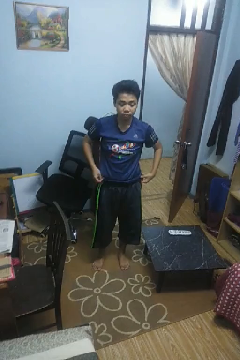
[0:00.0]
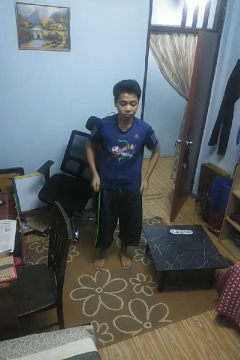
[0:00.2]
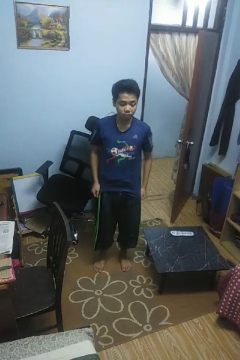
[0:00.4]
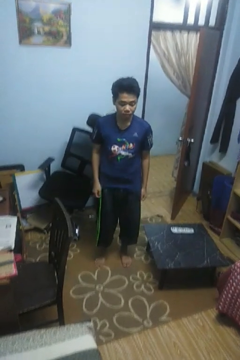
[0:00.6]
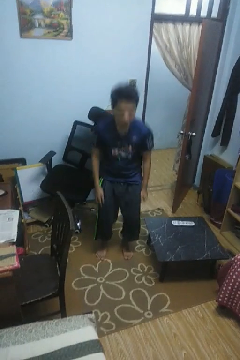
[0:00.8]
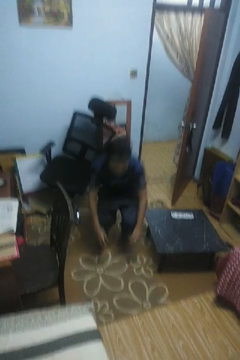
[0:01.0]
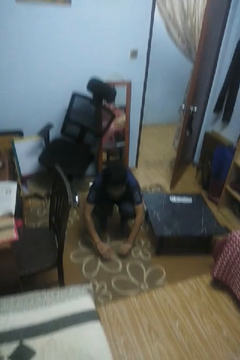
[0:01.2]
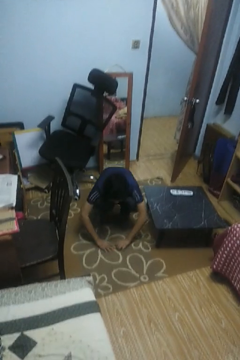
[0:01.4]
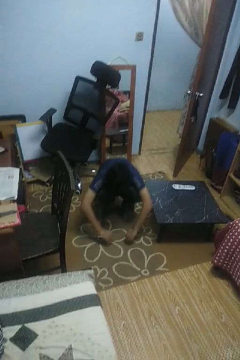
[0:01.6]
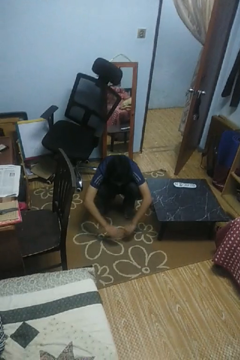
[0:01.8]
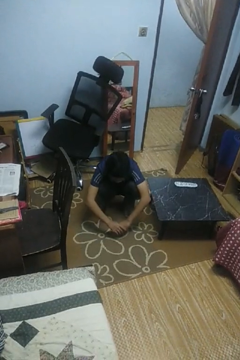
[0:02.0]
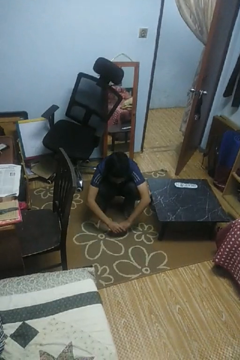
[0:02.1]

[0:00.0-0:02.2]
person squats

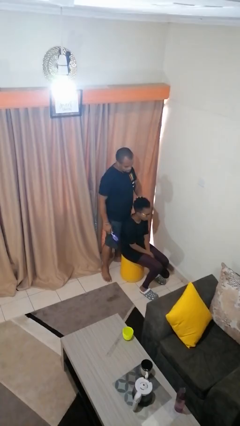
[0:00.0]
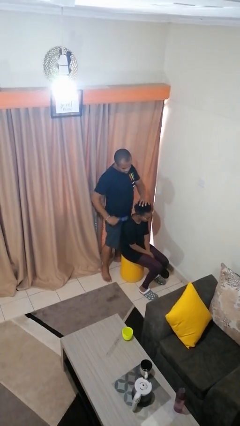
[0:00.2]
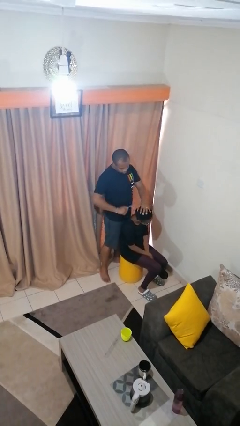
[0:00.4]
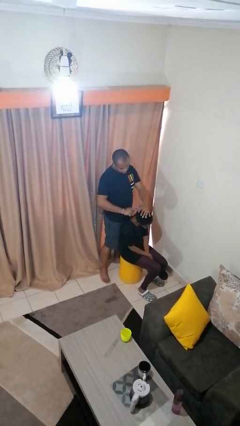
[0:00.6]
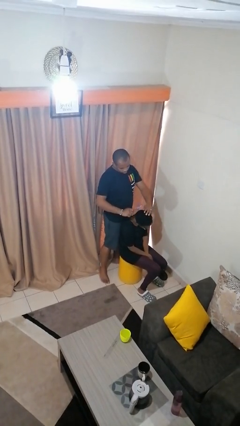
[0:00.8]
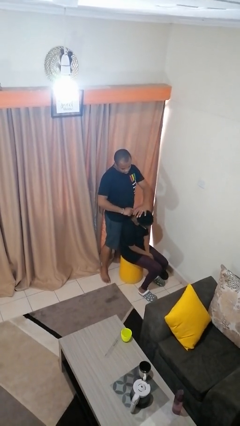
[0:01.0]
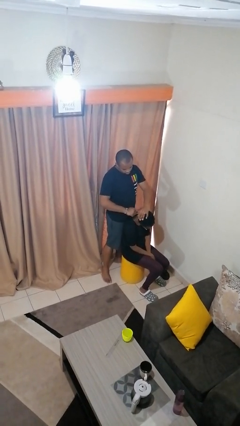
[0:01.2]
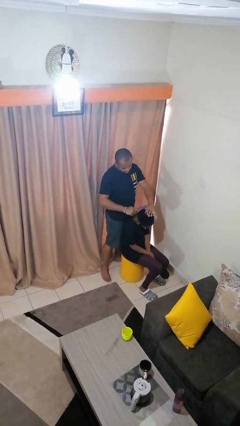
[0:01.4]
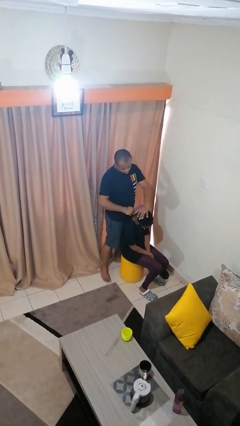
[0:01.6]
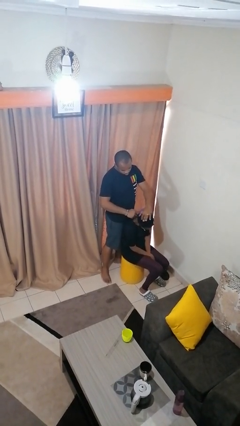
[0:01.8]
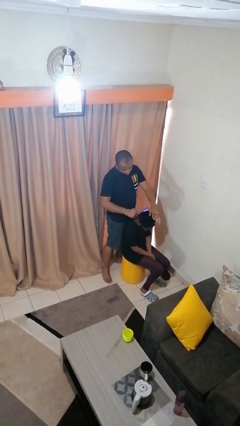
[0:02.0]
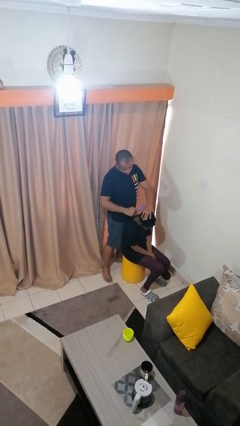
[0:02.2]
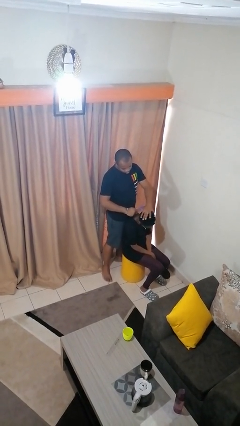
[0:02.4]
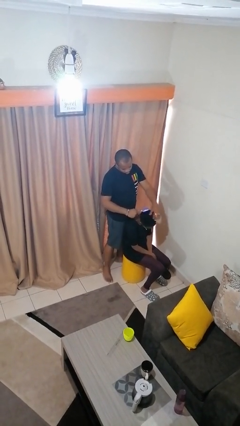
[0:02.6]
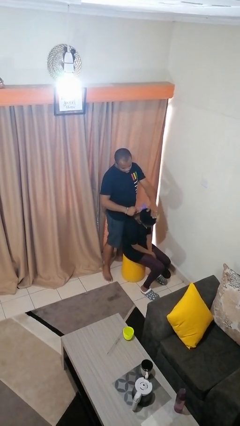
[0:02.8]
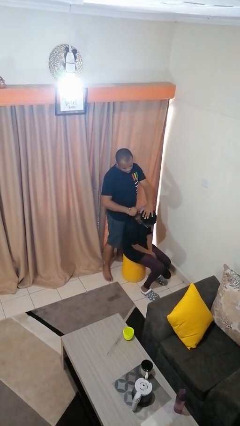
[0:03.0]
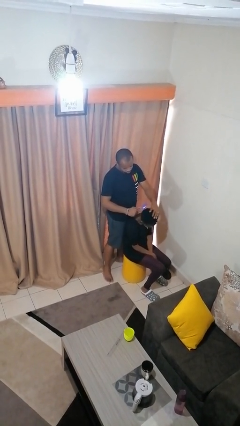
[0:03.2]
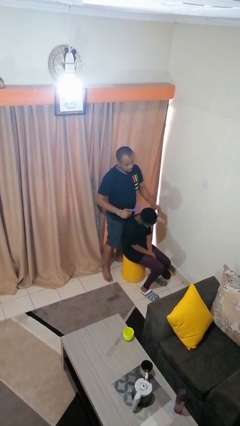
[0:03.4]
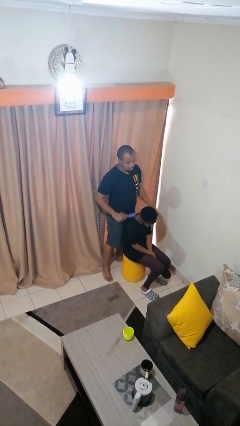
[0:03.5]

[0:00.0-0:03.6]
person brushes hair of person

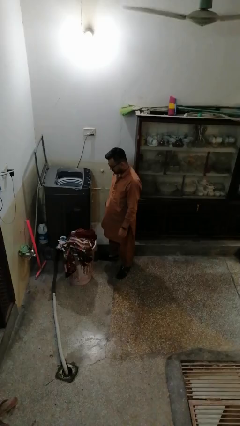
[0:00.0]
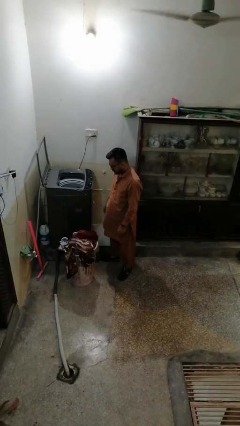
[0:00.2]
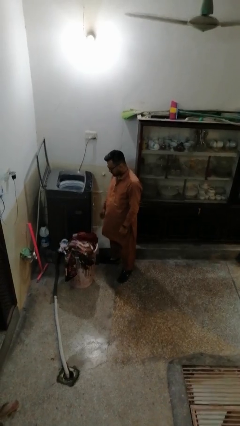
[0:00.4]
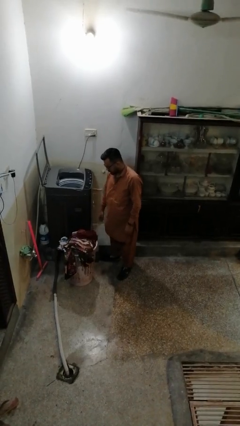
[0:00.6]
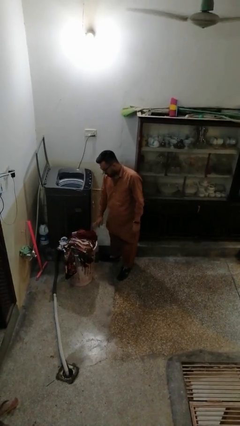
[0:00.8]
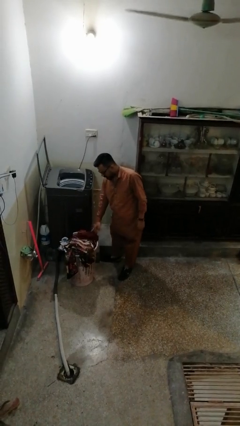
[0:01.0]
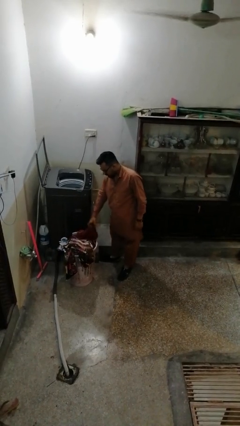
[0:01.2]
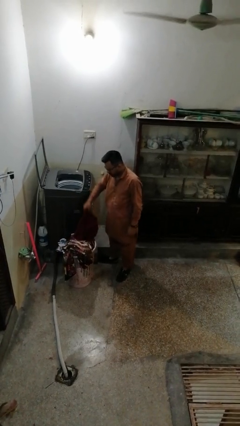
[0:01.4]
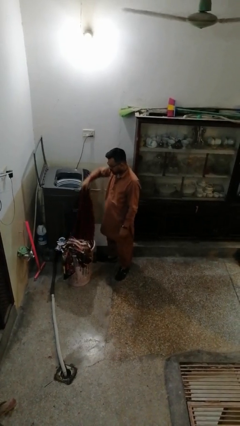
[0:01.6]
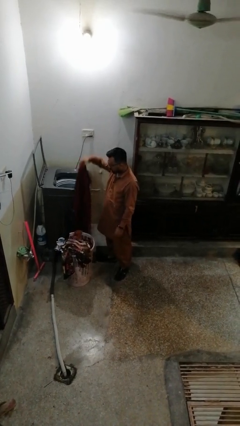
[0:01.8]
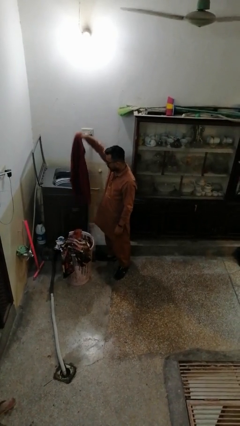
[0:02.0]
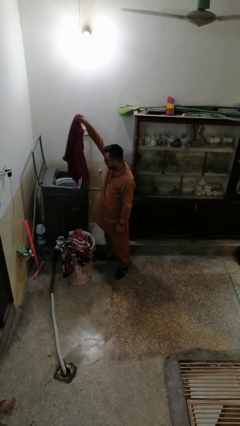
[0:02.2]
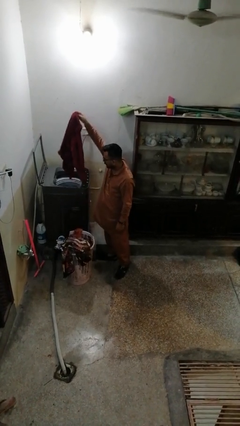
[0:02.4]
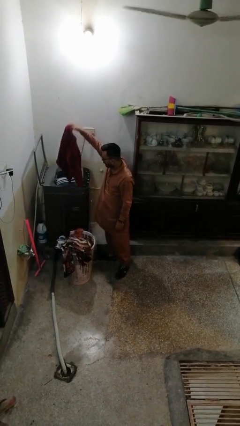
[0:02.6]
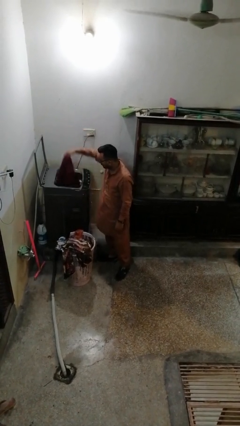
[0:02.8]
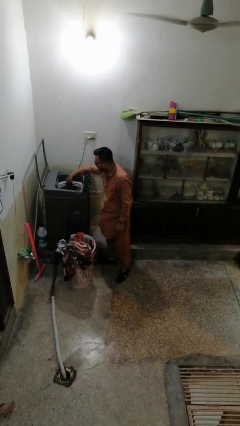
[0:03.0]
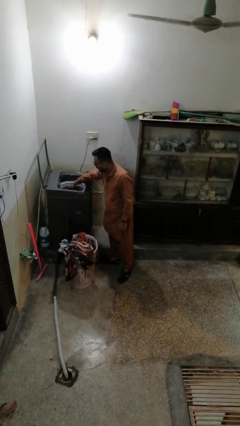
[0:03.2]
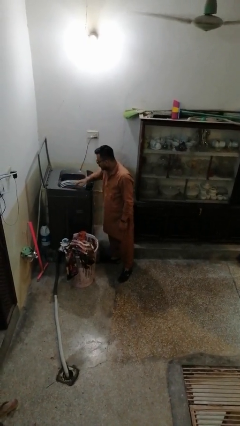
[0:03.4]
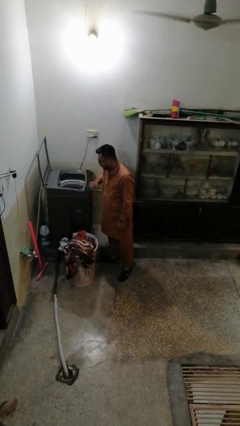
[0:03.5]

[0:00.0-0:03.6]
person loads dryer

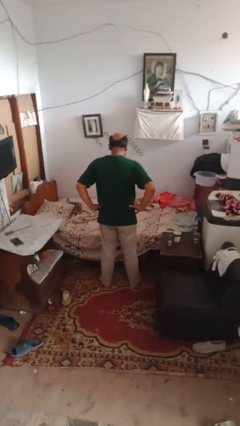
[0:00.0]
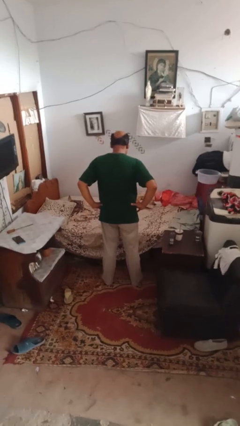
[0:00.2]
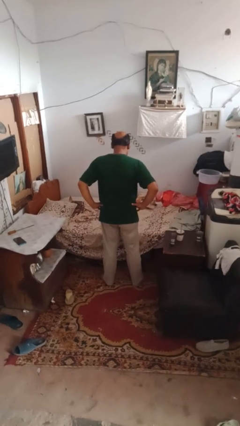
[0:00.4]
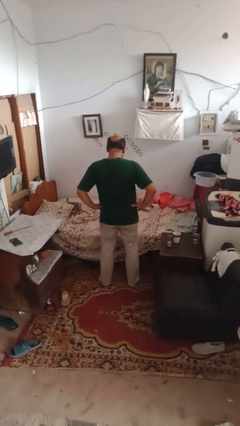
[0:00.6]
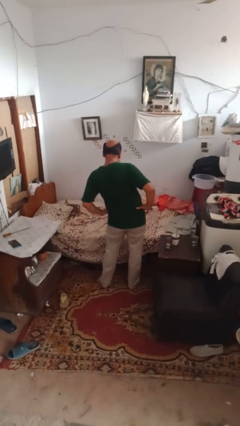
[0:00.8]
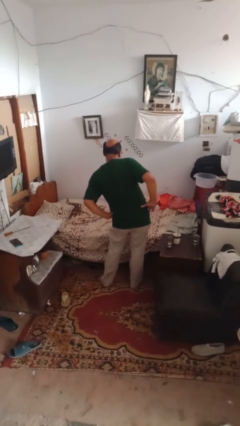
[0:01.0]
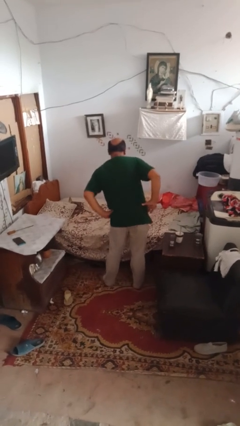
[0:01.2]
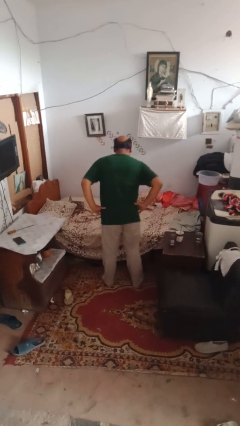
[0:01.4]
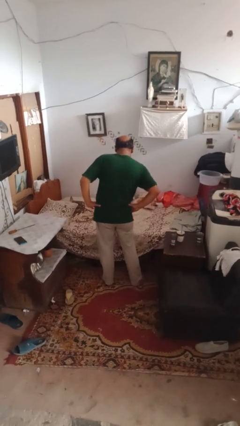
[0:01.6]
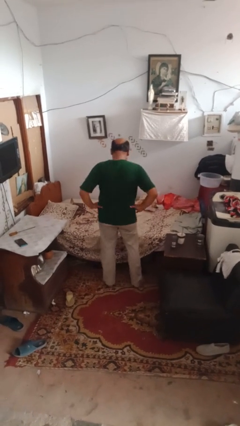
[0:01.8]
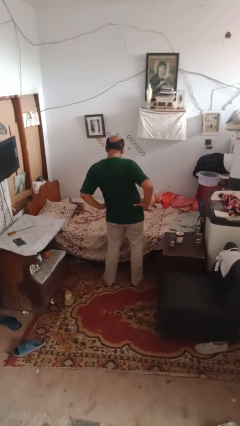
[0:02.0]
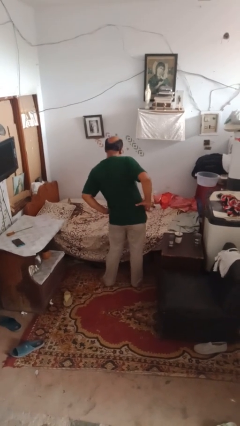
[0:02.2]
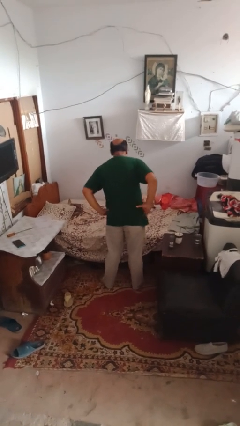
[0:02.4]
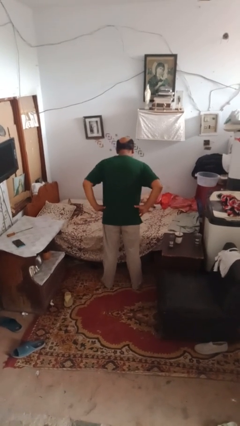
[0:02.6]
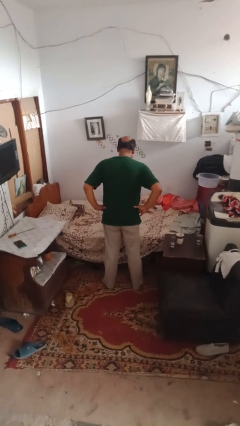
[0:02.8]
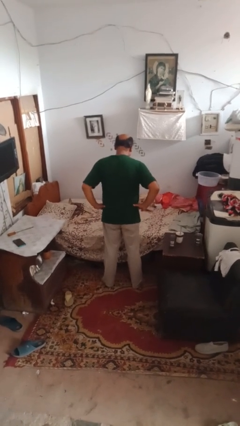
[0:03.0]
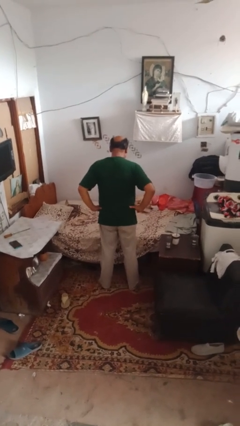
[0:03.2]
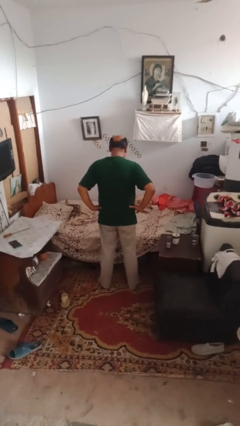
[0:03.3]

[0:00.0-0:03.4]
person wiggles hips

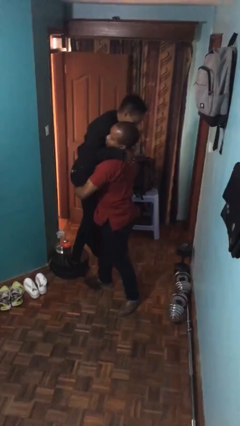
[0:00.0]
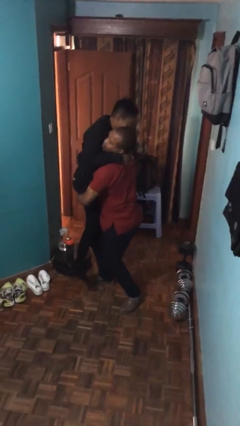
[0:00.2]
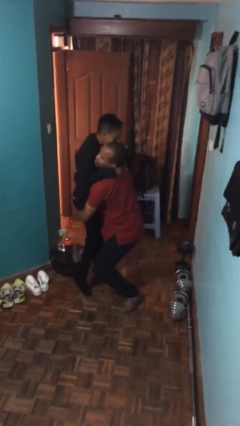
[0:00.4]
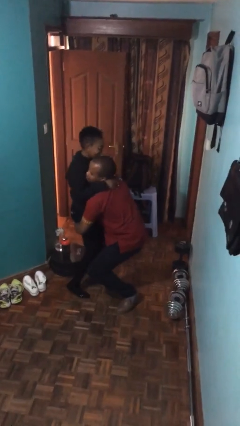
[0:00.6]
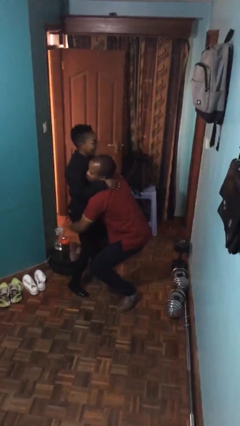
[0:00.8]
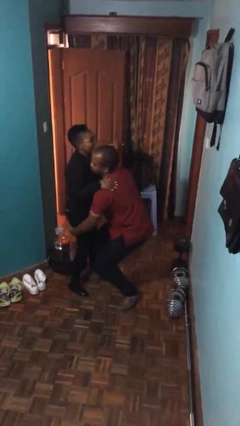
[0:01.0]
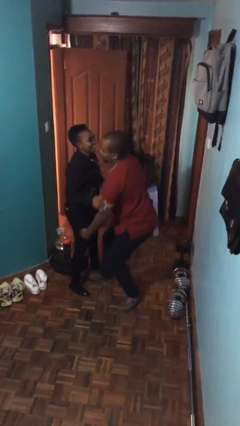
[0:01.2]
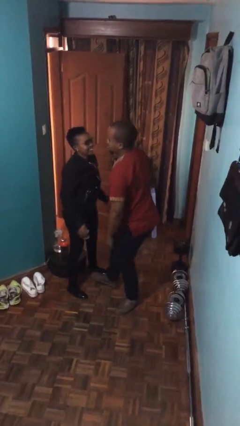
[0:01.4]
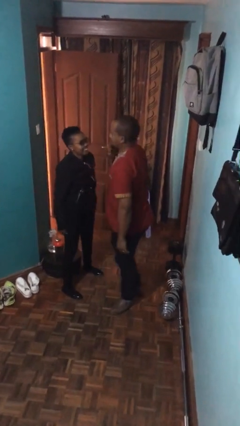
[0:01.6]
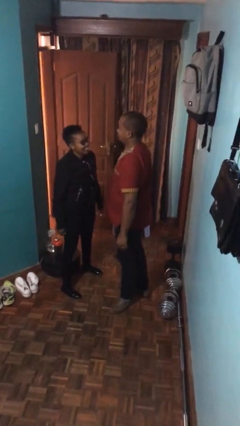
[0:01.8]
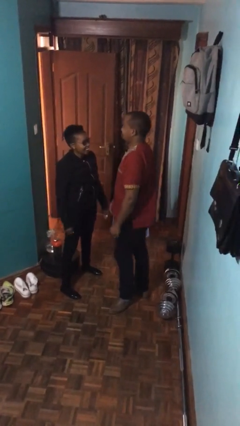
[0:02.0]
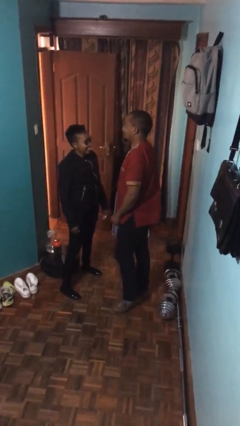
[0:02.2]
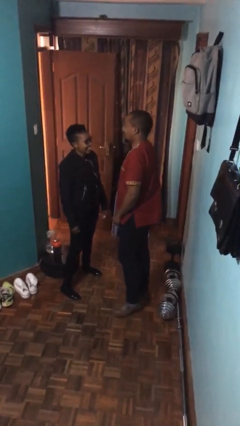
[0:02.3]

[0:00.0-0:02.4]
person puts down person

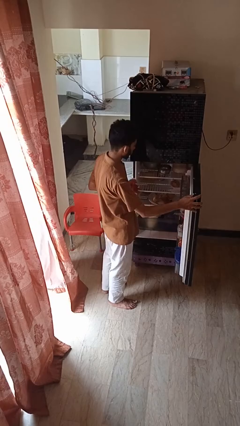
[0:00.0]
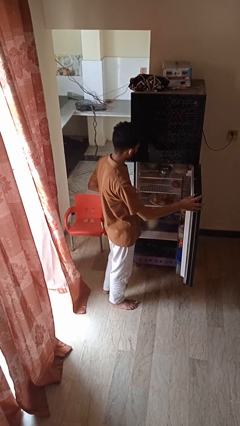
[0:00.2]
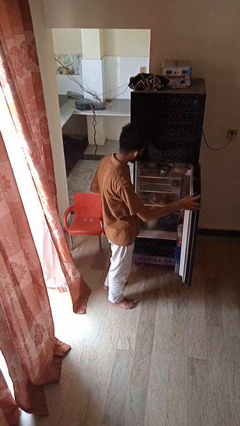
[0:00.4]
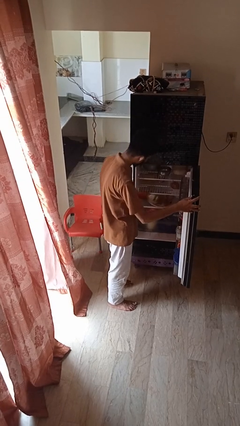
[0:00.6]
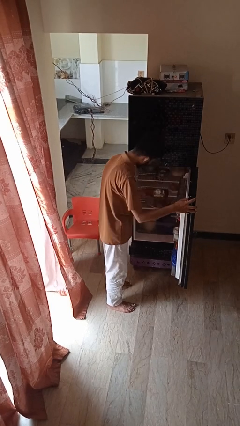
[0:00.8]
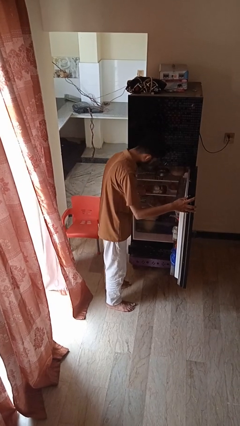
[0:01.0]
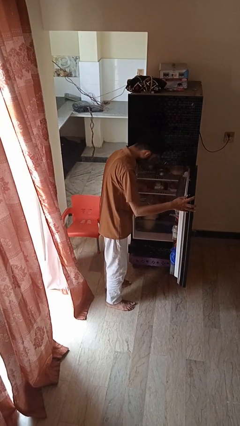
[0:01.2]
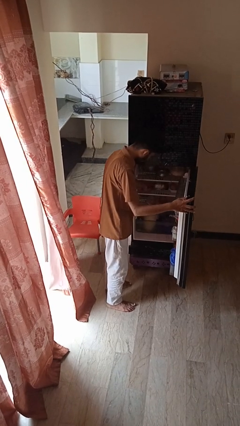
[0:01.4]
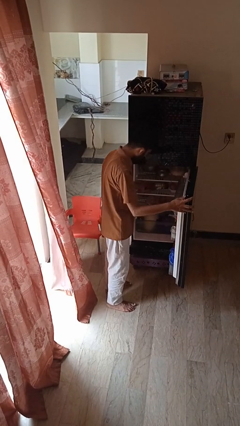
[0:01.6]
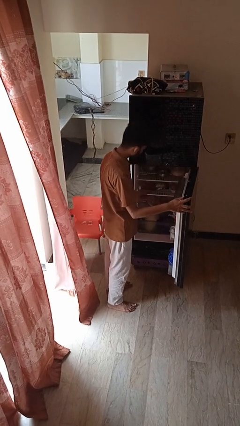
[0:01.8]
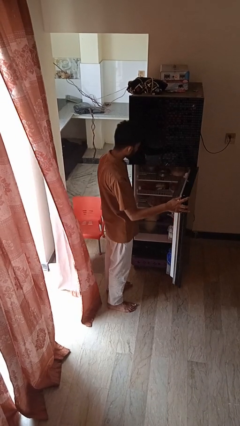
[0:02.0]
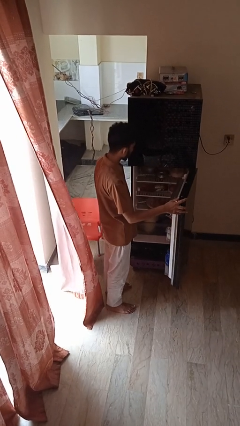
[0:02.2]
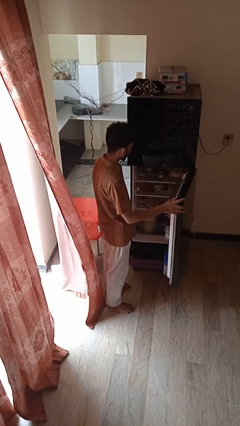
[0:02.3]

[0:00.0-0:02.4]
person puts object into refrigerator

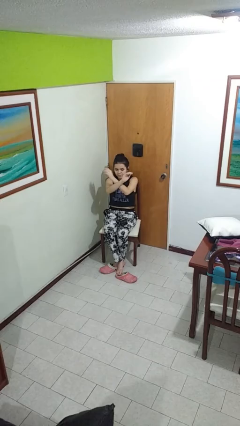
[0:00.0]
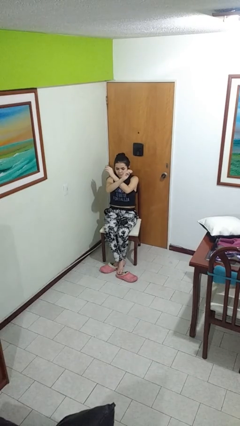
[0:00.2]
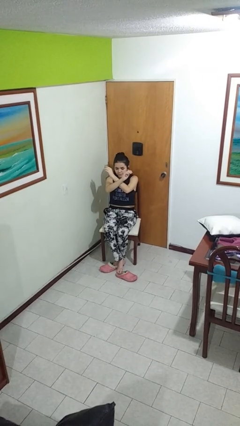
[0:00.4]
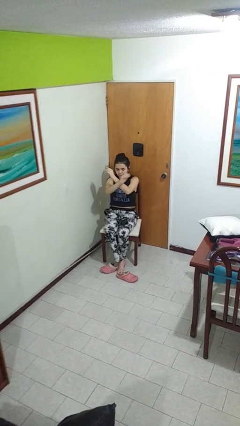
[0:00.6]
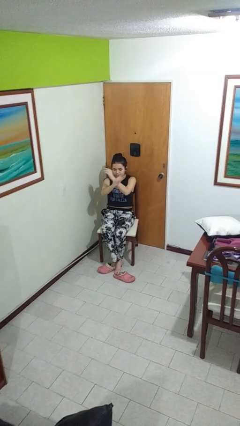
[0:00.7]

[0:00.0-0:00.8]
person gestures arms x
